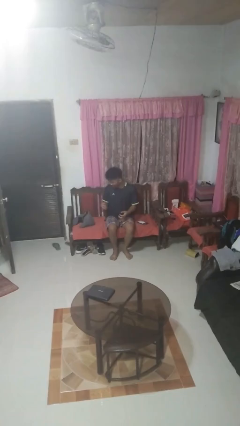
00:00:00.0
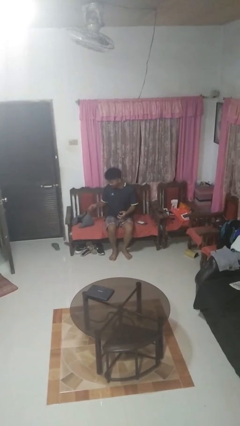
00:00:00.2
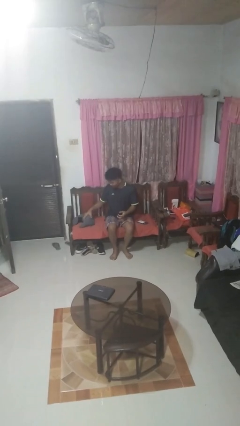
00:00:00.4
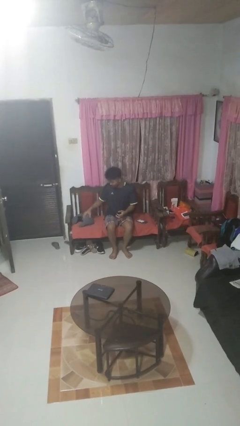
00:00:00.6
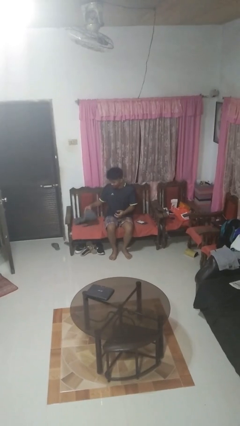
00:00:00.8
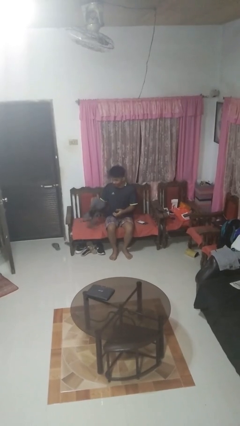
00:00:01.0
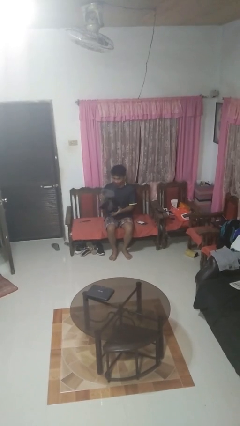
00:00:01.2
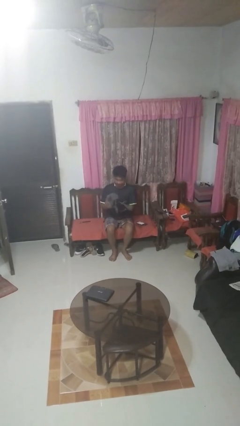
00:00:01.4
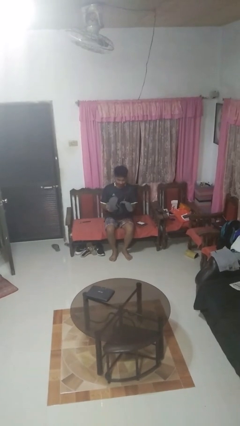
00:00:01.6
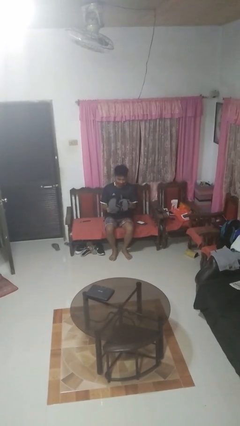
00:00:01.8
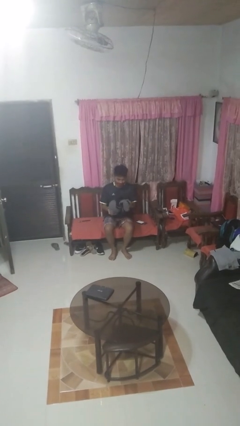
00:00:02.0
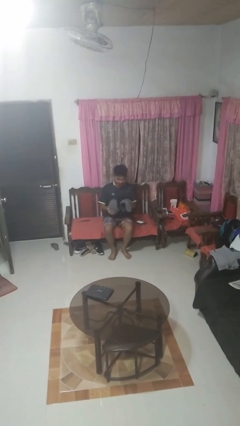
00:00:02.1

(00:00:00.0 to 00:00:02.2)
person picks up object from floor

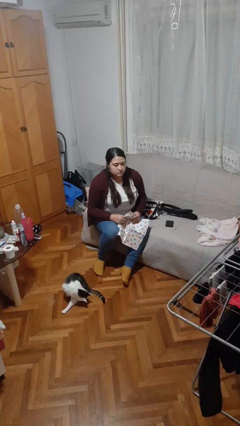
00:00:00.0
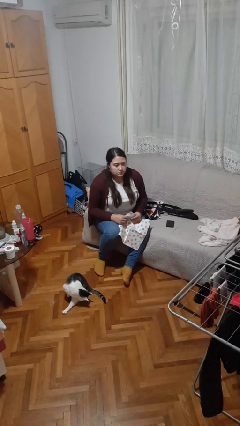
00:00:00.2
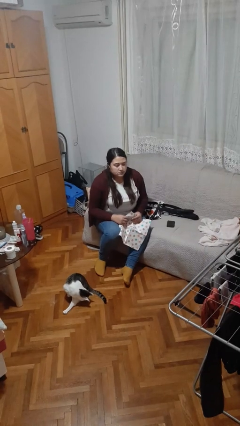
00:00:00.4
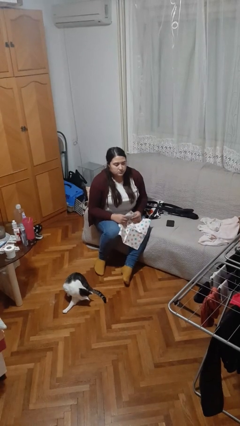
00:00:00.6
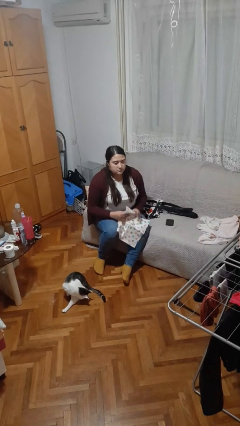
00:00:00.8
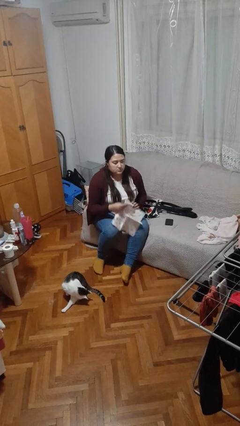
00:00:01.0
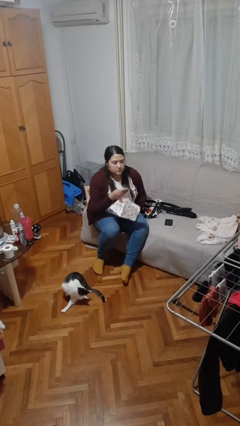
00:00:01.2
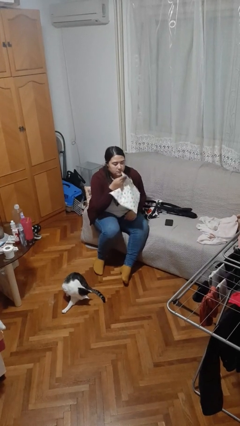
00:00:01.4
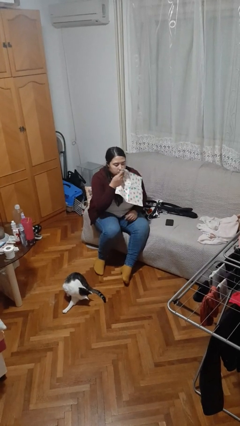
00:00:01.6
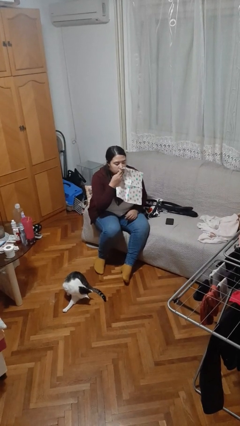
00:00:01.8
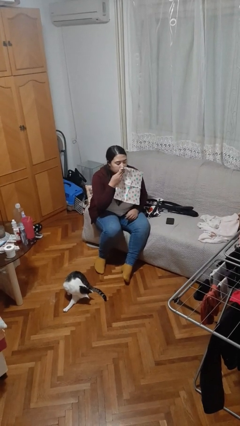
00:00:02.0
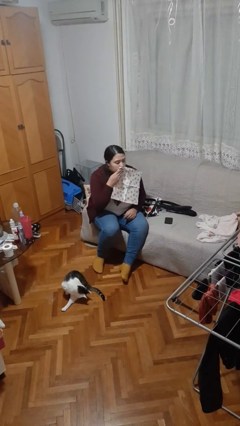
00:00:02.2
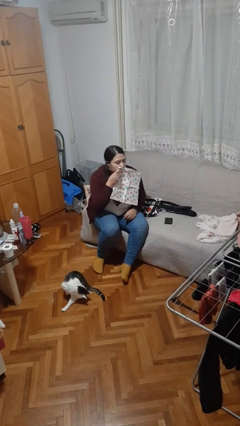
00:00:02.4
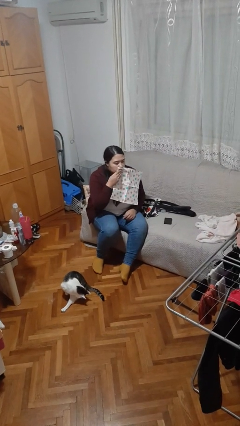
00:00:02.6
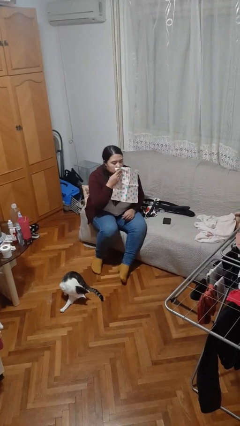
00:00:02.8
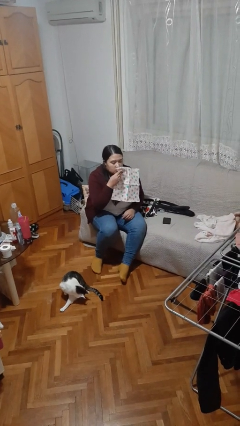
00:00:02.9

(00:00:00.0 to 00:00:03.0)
person wipes mouth with napkin

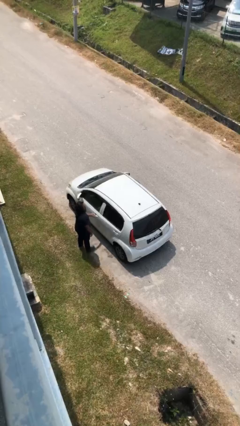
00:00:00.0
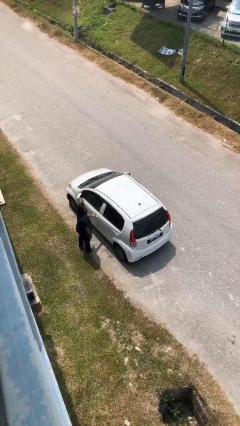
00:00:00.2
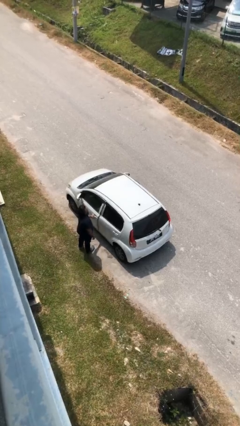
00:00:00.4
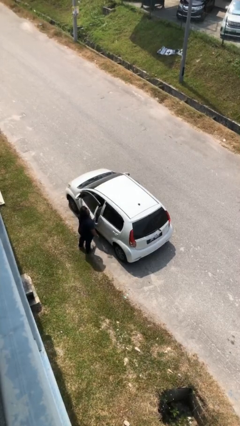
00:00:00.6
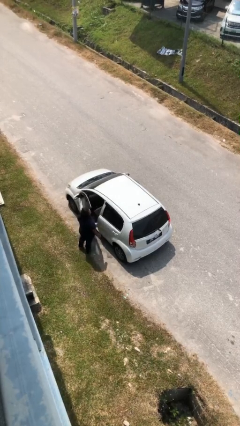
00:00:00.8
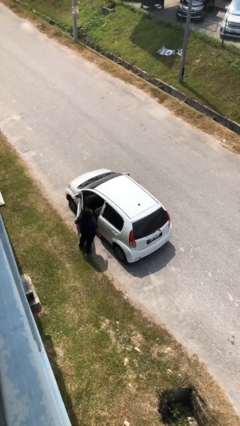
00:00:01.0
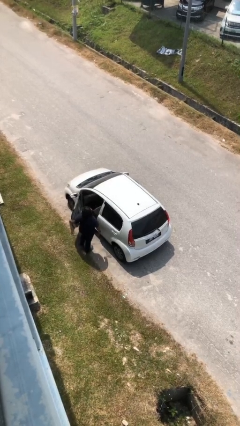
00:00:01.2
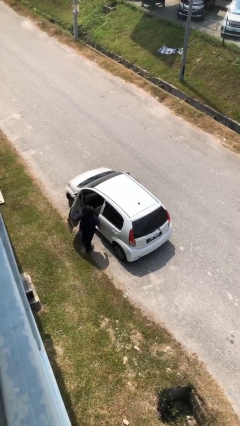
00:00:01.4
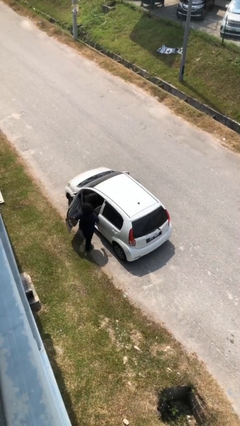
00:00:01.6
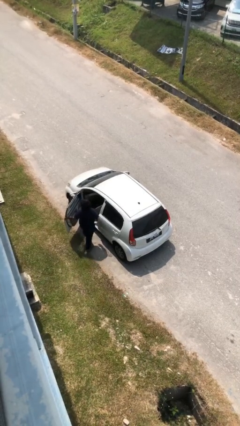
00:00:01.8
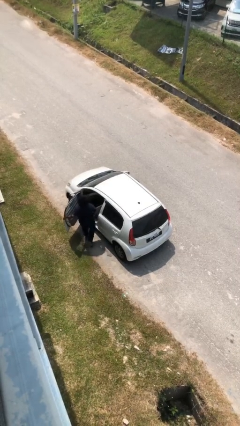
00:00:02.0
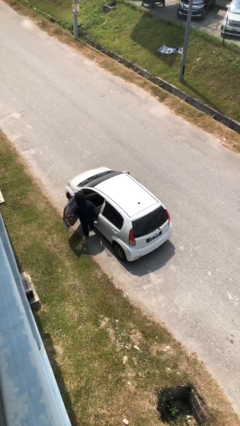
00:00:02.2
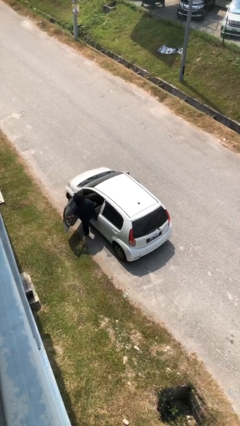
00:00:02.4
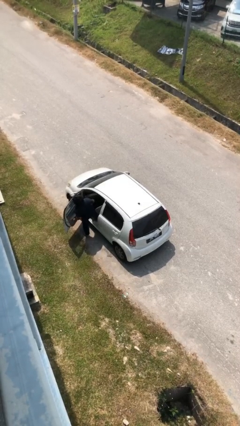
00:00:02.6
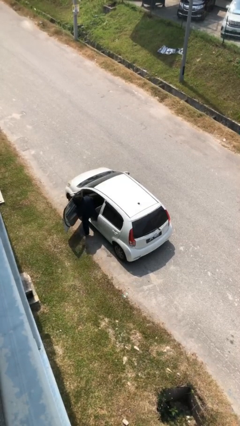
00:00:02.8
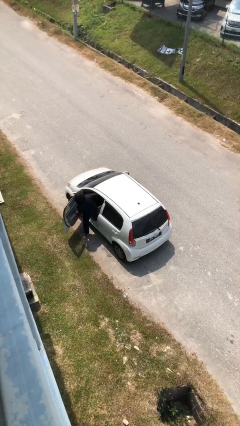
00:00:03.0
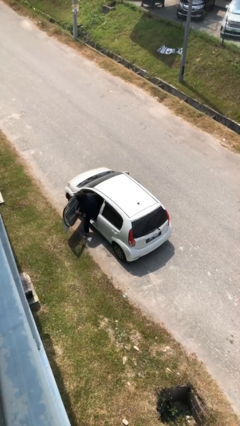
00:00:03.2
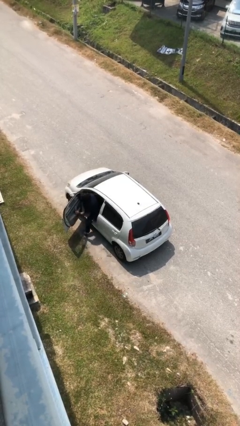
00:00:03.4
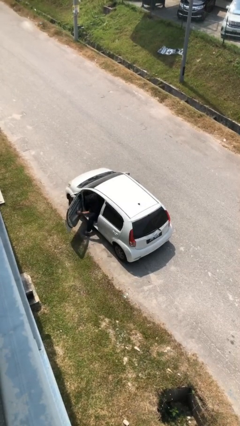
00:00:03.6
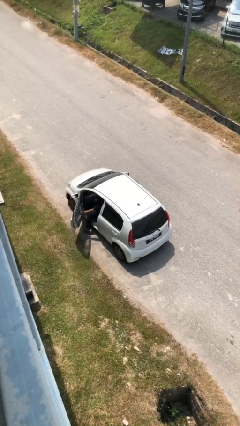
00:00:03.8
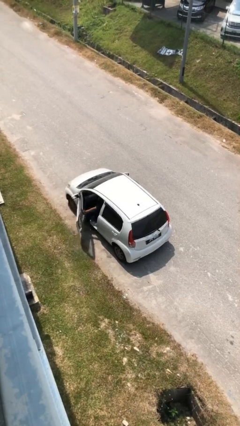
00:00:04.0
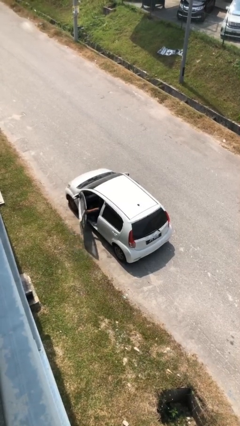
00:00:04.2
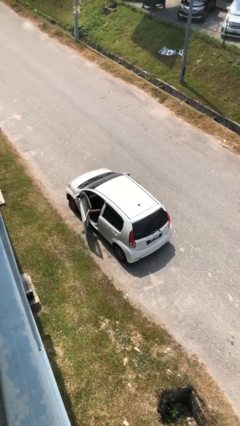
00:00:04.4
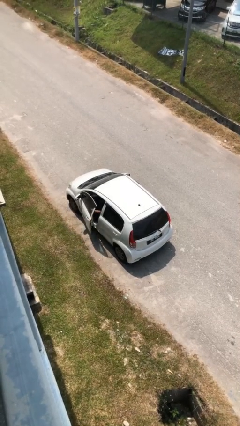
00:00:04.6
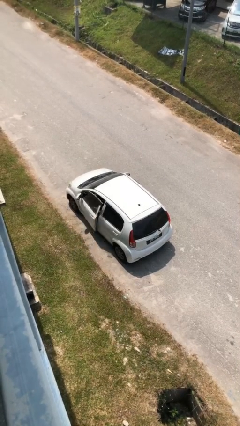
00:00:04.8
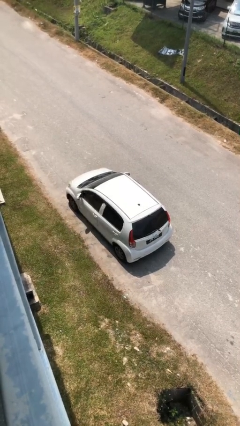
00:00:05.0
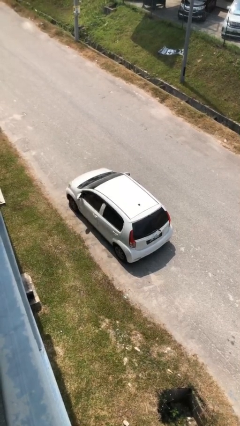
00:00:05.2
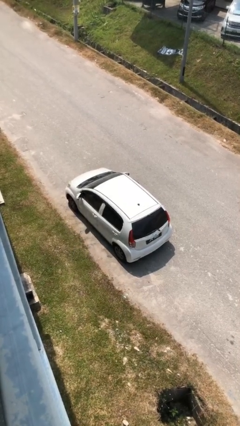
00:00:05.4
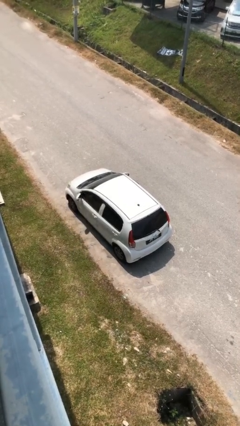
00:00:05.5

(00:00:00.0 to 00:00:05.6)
car picks up person

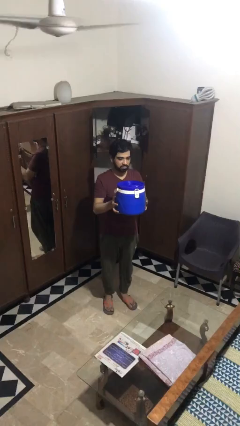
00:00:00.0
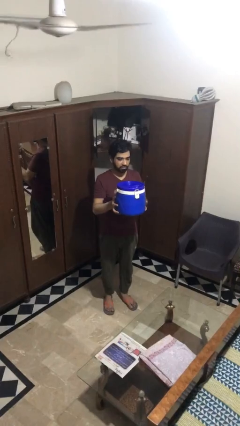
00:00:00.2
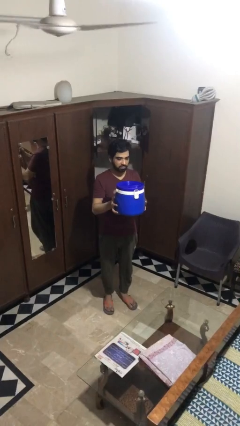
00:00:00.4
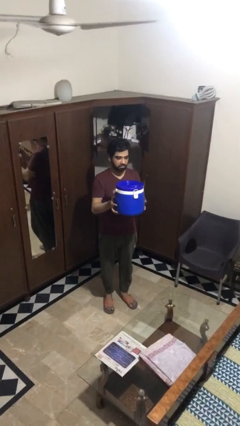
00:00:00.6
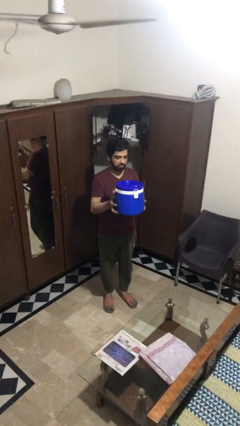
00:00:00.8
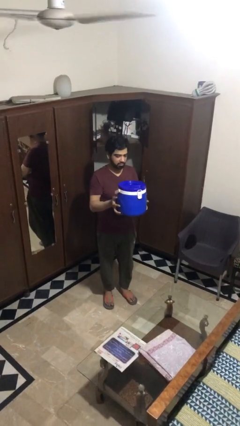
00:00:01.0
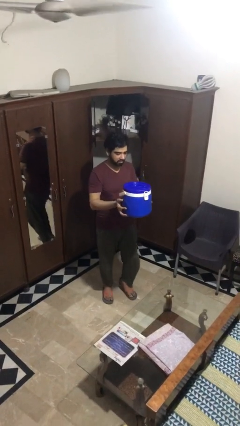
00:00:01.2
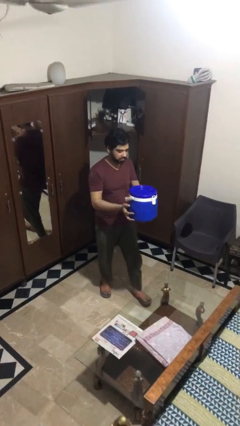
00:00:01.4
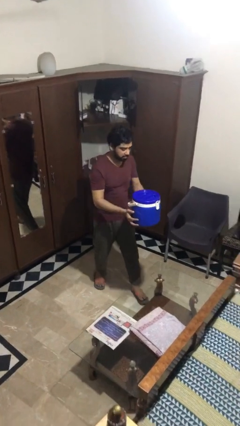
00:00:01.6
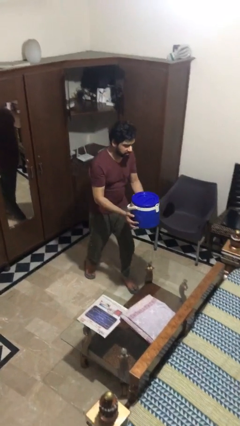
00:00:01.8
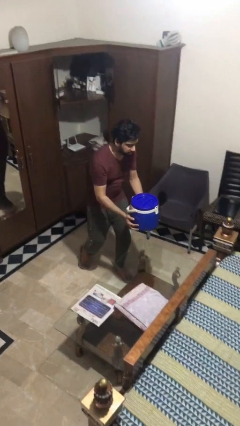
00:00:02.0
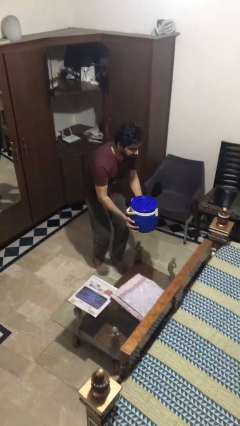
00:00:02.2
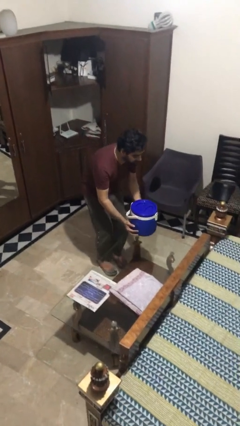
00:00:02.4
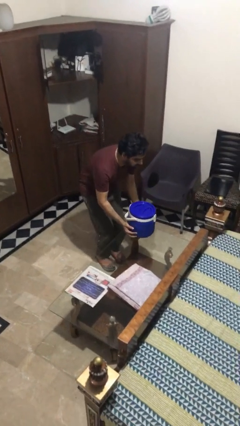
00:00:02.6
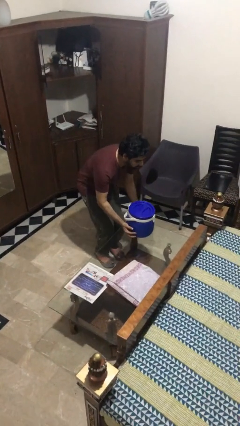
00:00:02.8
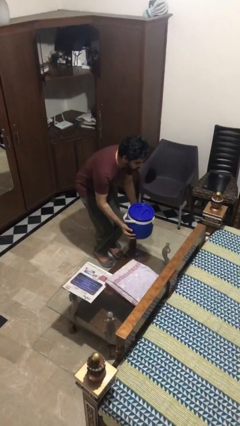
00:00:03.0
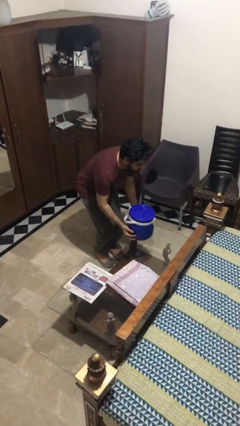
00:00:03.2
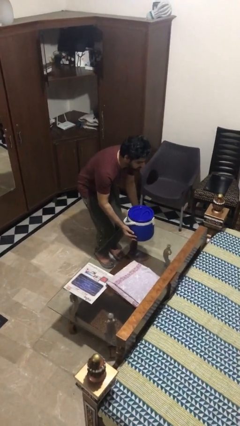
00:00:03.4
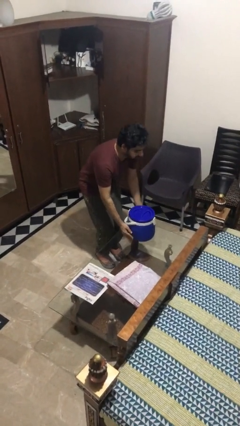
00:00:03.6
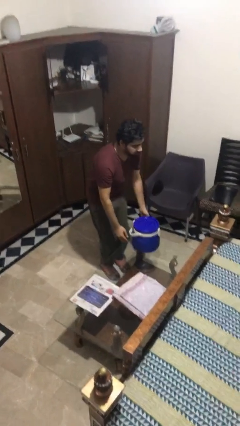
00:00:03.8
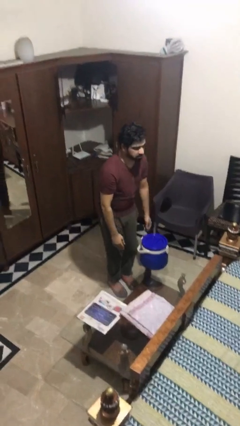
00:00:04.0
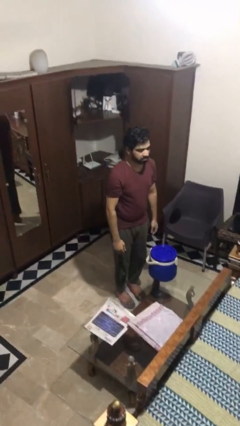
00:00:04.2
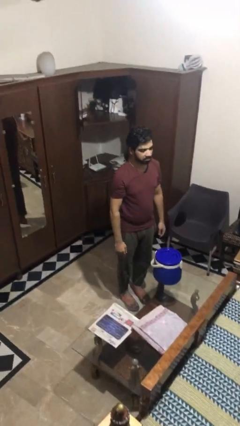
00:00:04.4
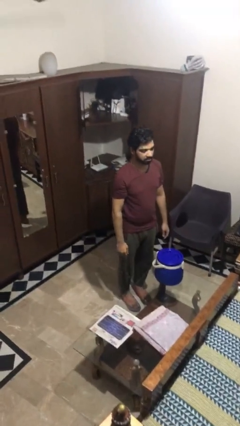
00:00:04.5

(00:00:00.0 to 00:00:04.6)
person puts down object on table

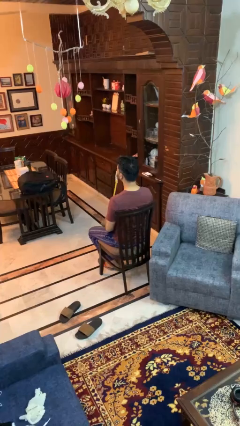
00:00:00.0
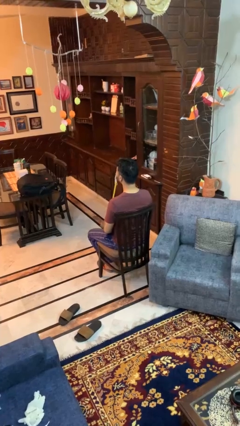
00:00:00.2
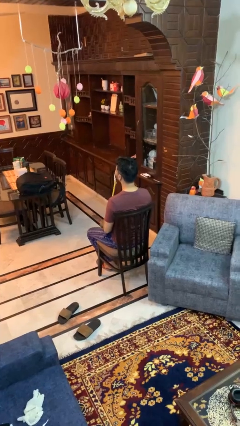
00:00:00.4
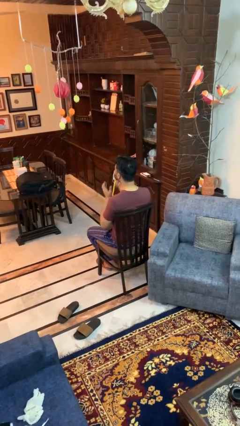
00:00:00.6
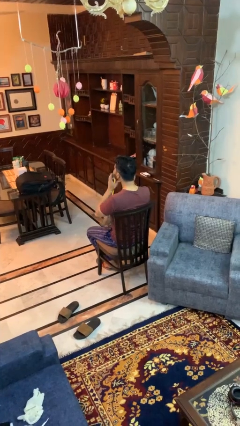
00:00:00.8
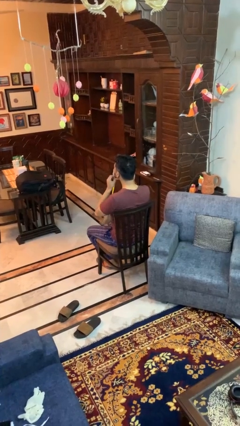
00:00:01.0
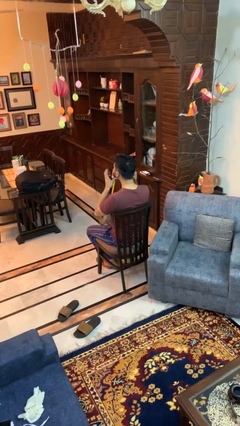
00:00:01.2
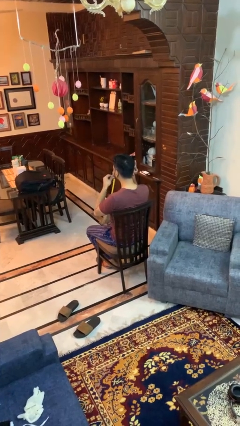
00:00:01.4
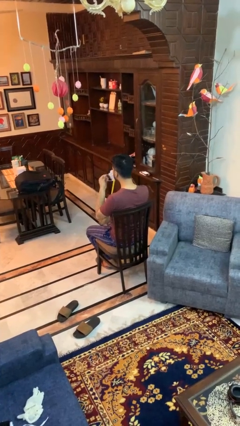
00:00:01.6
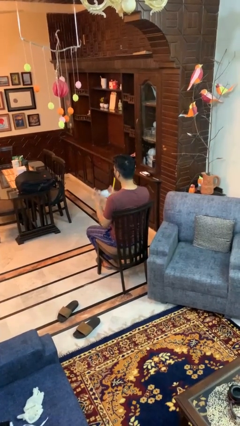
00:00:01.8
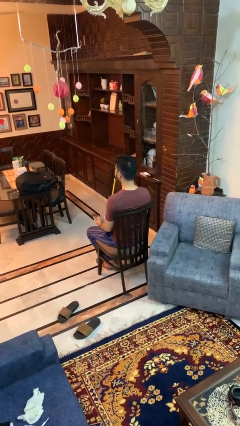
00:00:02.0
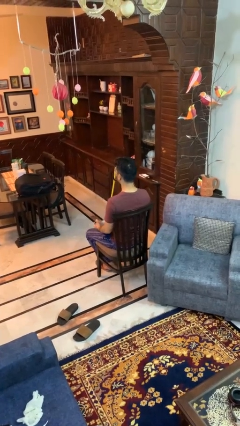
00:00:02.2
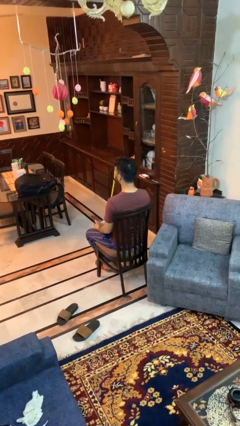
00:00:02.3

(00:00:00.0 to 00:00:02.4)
person takes off facemask
